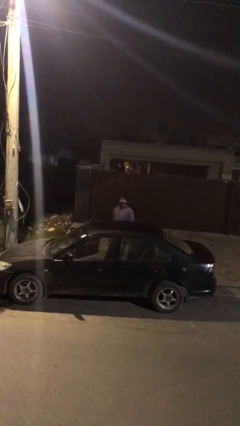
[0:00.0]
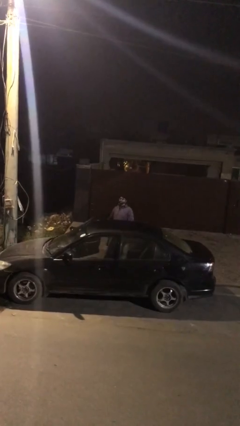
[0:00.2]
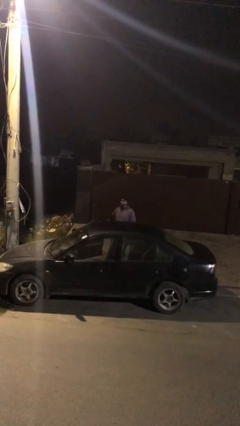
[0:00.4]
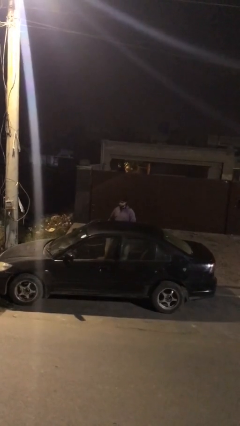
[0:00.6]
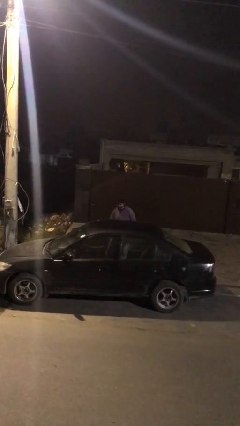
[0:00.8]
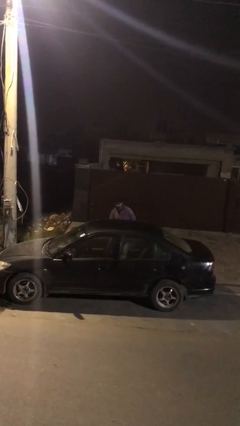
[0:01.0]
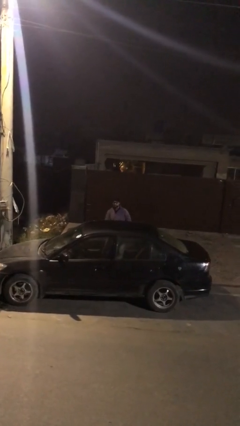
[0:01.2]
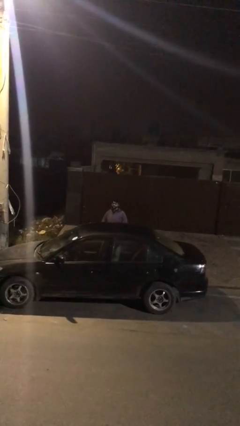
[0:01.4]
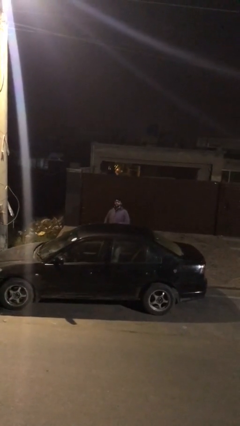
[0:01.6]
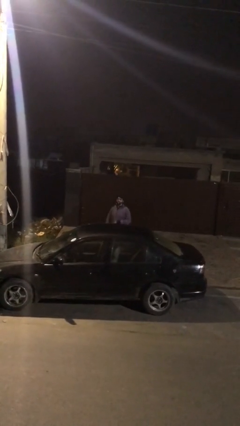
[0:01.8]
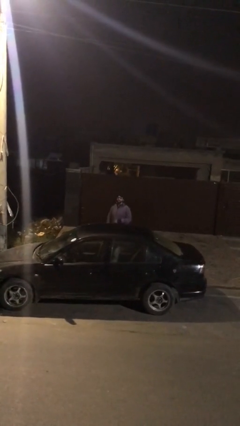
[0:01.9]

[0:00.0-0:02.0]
person closes car door

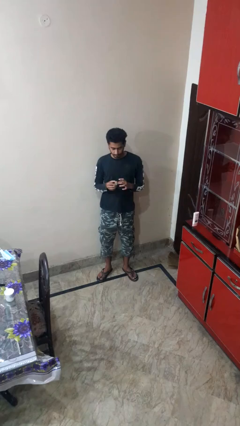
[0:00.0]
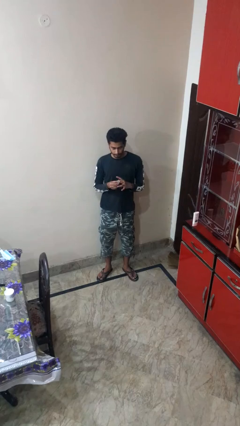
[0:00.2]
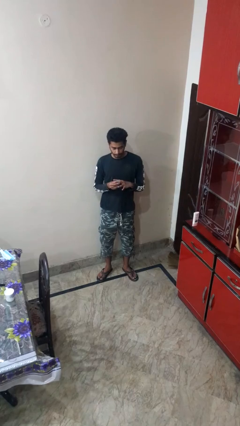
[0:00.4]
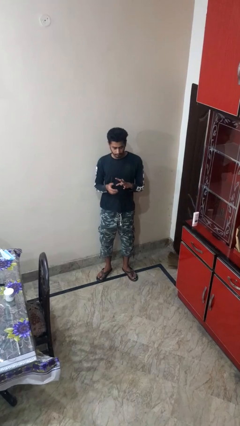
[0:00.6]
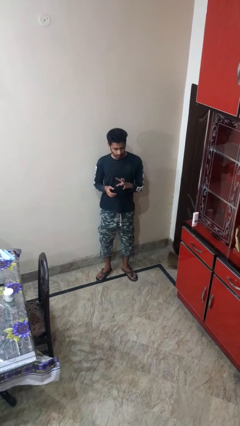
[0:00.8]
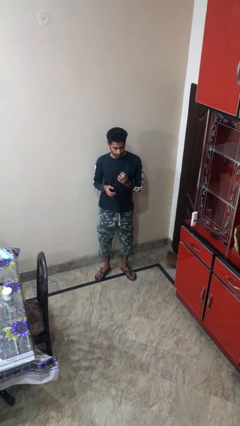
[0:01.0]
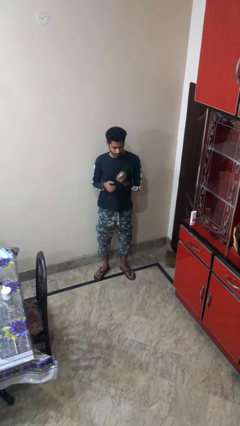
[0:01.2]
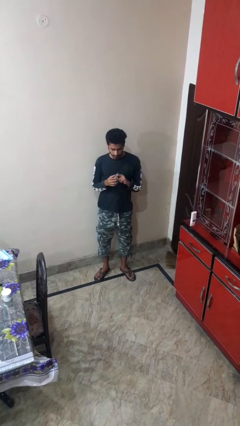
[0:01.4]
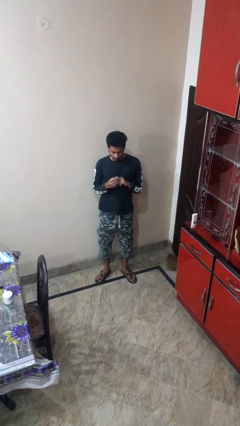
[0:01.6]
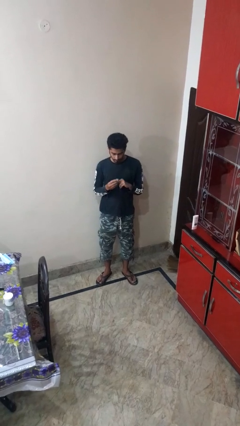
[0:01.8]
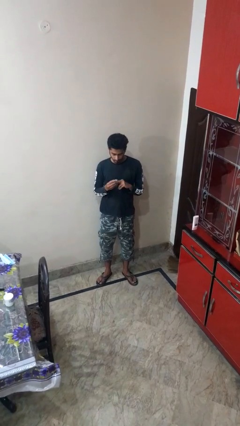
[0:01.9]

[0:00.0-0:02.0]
person puts on ring

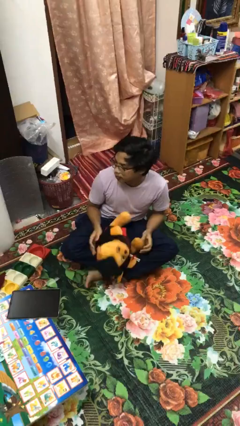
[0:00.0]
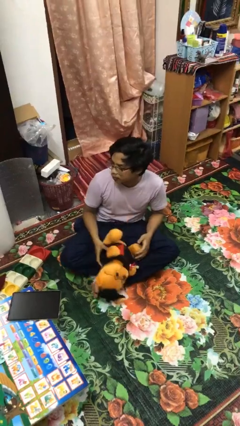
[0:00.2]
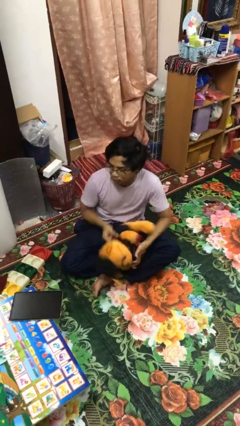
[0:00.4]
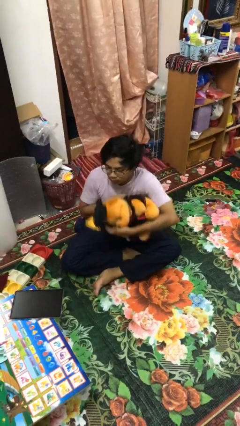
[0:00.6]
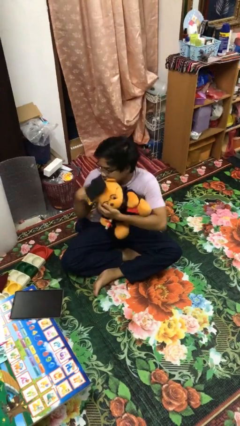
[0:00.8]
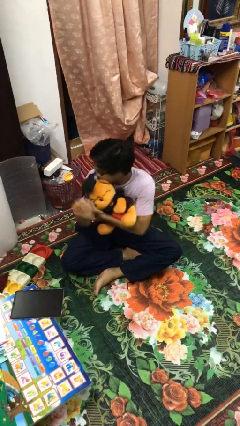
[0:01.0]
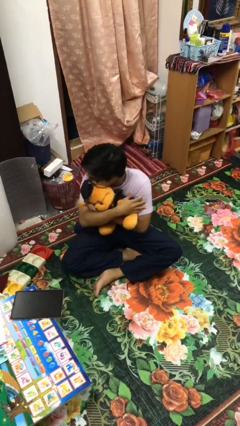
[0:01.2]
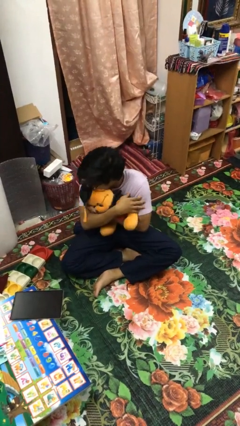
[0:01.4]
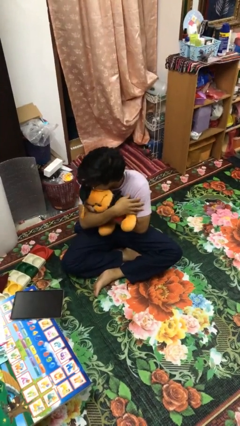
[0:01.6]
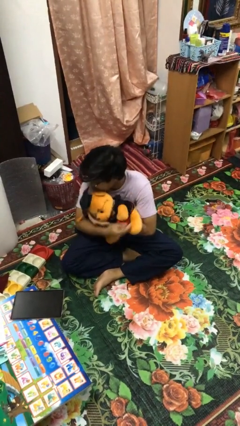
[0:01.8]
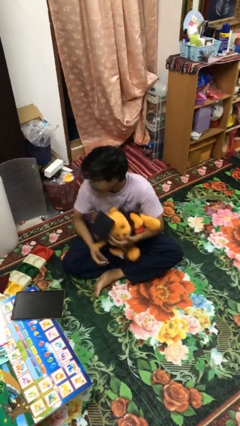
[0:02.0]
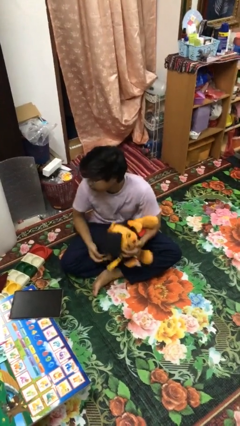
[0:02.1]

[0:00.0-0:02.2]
person hugs stuffed animal

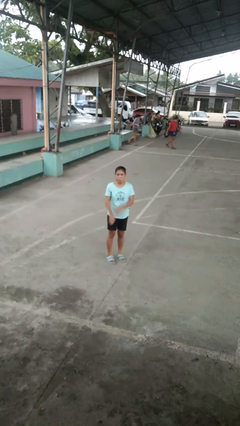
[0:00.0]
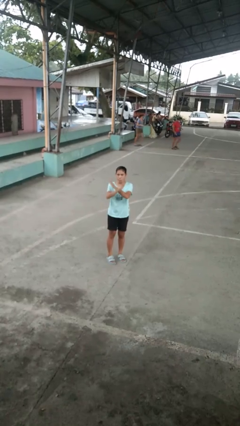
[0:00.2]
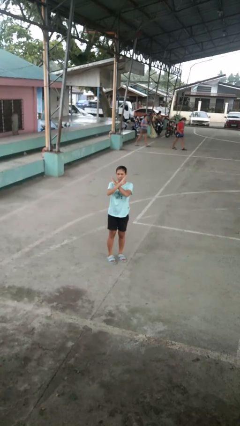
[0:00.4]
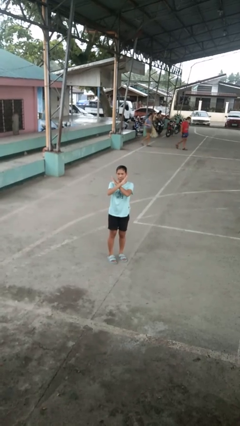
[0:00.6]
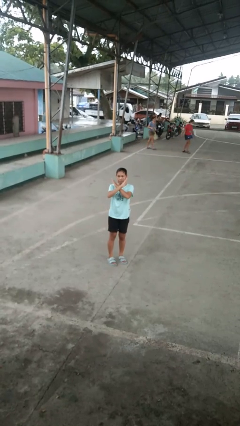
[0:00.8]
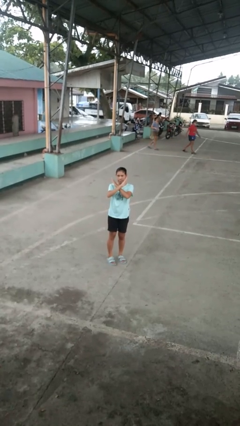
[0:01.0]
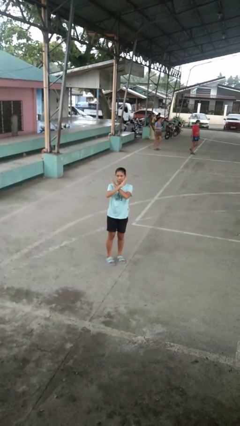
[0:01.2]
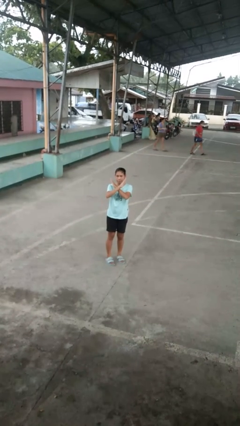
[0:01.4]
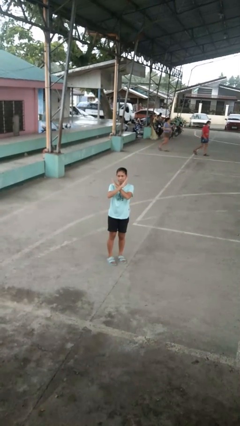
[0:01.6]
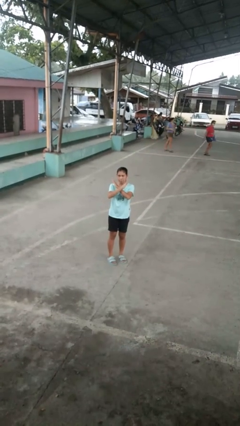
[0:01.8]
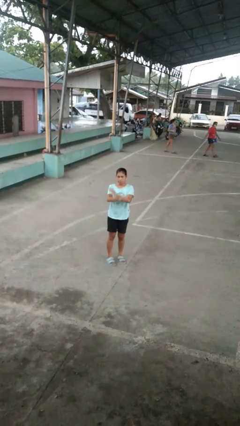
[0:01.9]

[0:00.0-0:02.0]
person gestures arms x

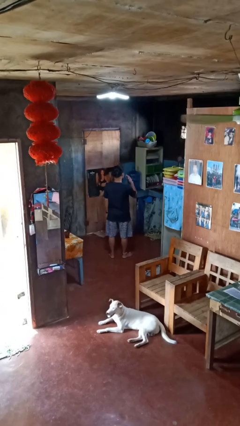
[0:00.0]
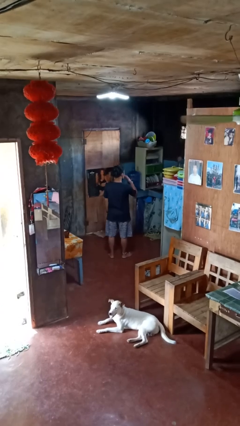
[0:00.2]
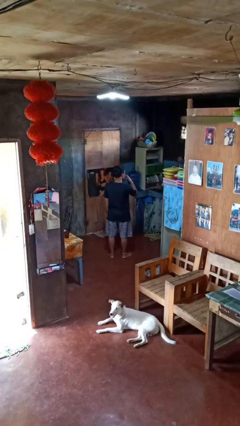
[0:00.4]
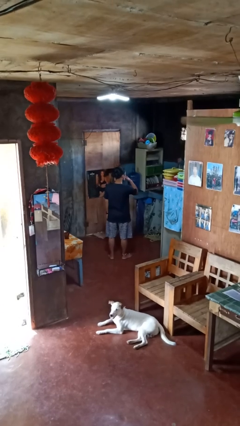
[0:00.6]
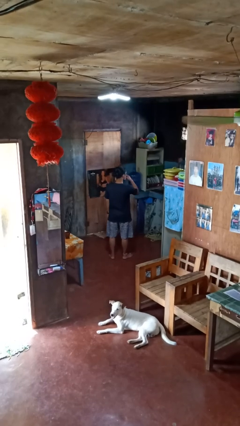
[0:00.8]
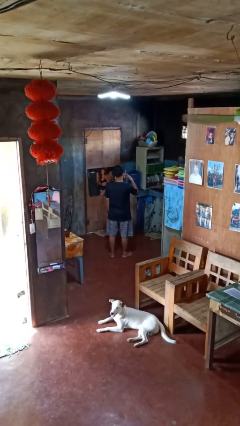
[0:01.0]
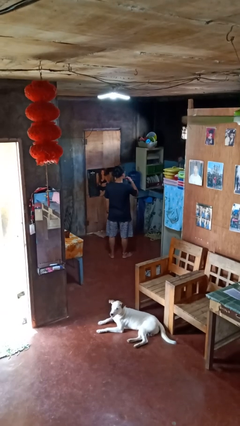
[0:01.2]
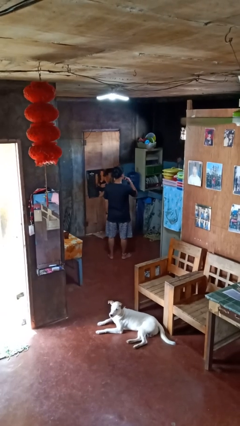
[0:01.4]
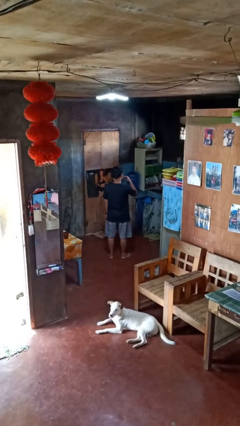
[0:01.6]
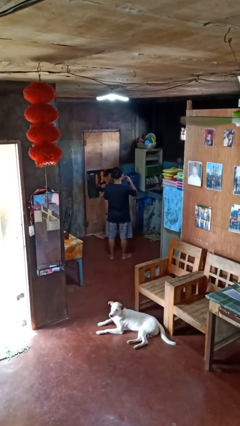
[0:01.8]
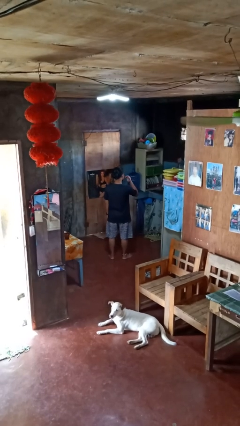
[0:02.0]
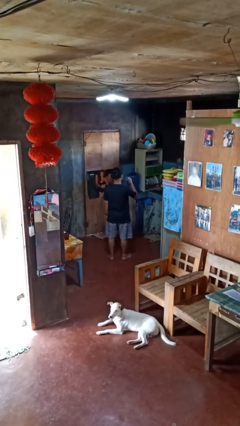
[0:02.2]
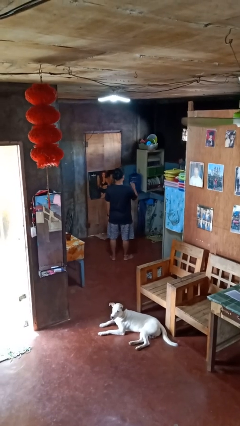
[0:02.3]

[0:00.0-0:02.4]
person licks fingers

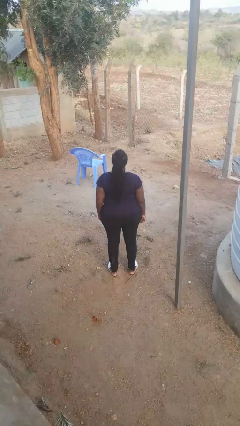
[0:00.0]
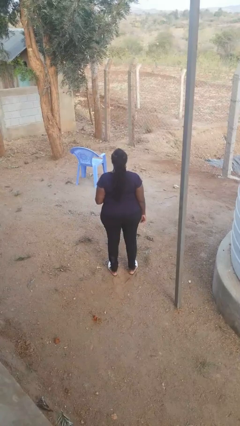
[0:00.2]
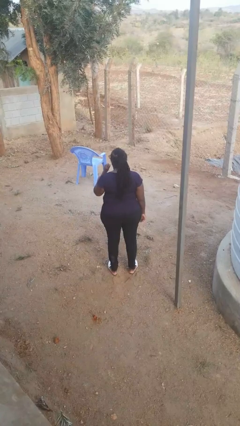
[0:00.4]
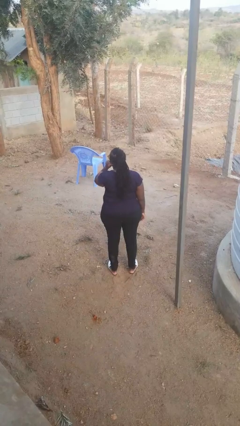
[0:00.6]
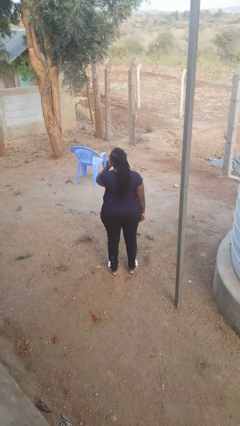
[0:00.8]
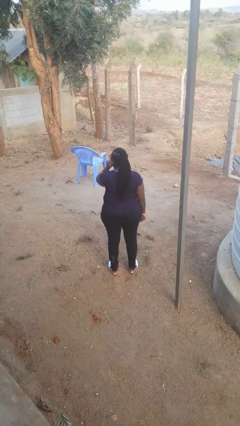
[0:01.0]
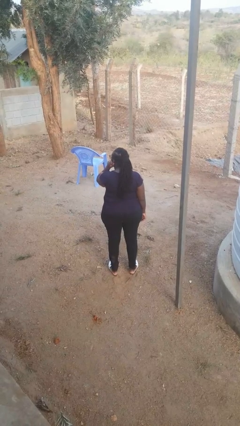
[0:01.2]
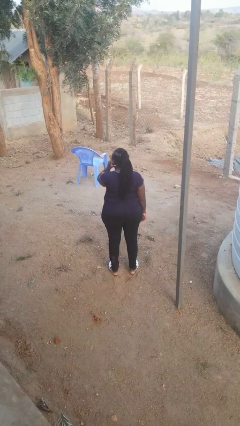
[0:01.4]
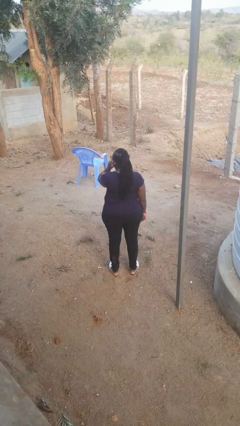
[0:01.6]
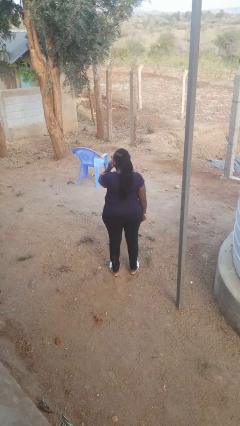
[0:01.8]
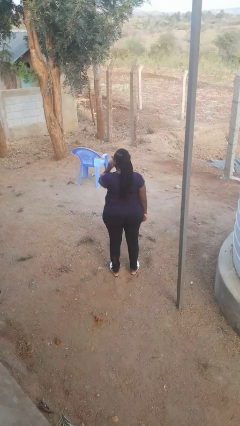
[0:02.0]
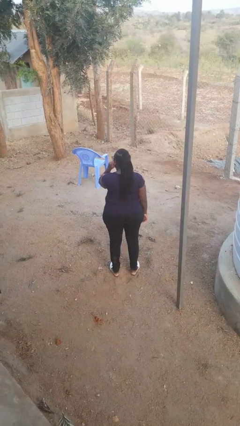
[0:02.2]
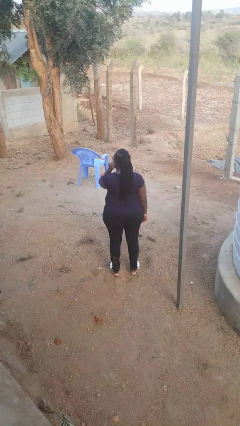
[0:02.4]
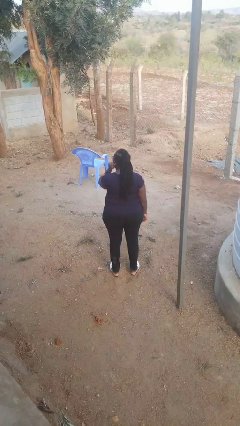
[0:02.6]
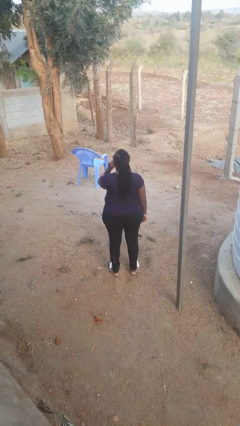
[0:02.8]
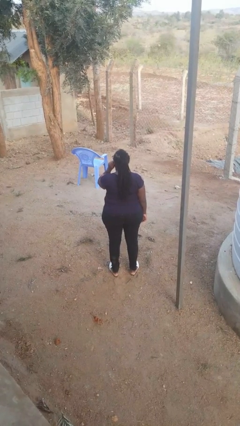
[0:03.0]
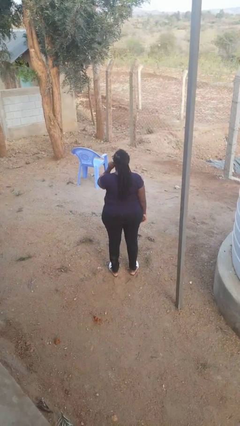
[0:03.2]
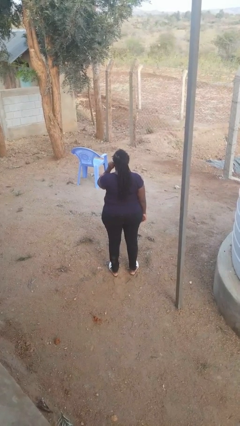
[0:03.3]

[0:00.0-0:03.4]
person touches earlobe

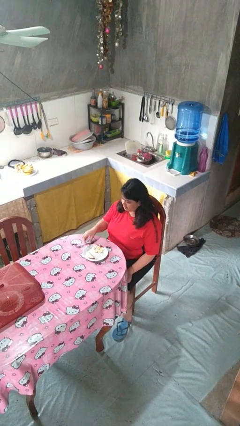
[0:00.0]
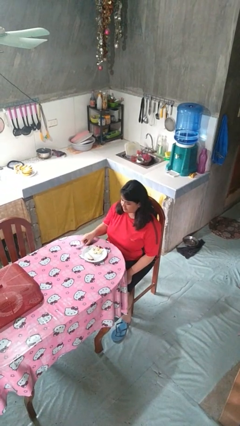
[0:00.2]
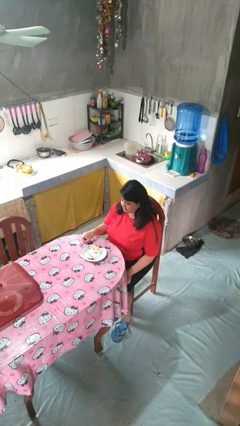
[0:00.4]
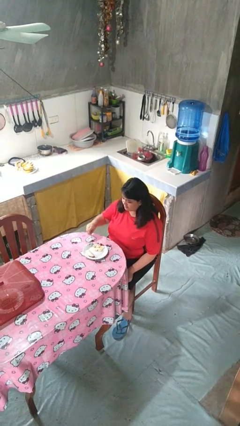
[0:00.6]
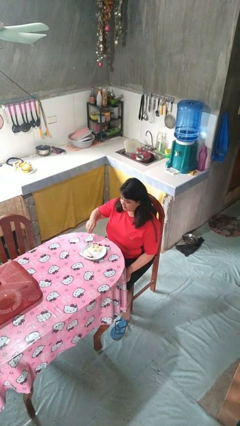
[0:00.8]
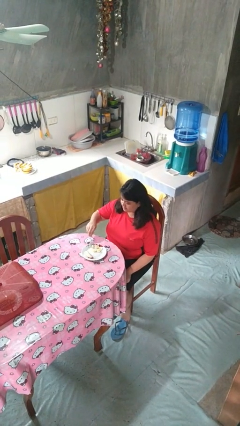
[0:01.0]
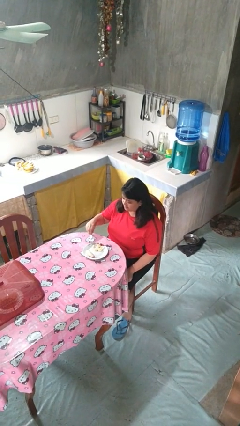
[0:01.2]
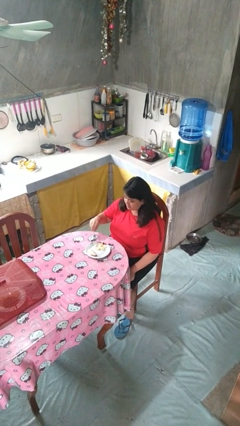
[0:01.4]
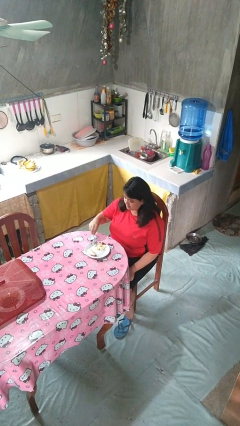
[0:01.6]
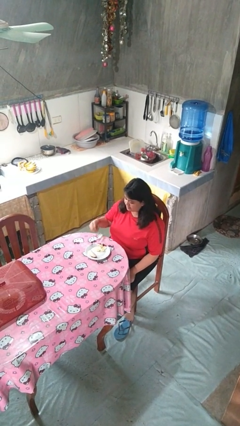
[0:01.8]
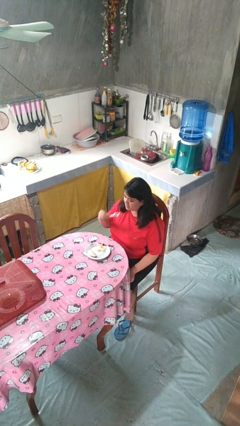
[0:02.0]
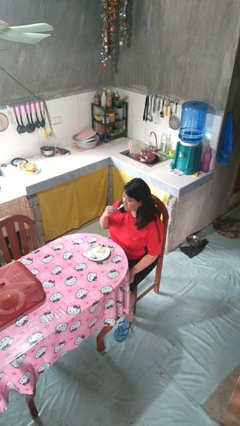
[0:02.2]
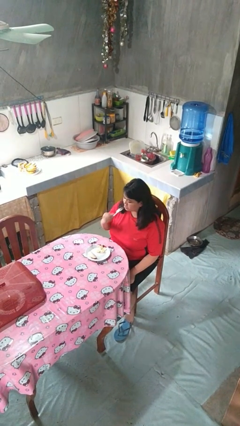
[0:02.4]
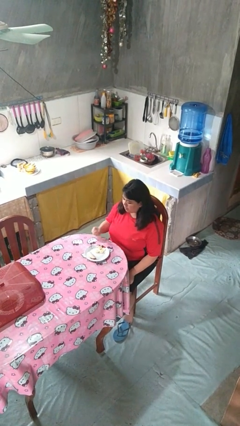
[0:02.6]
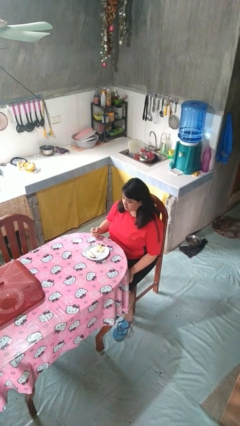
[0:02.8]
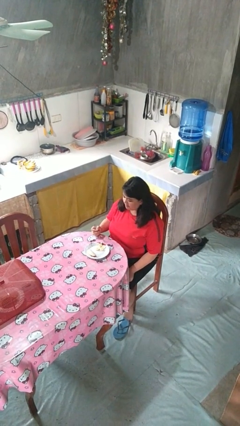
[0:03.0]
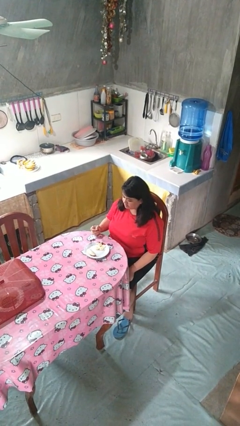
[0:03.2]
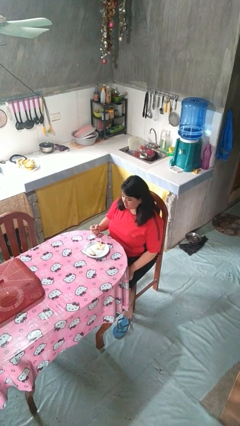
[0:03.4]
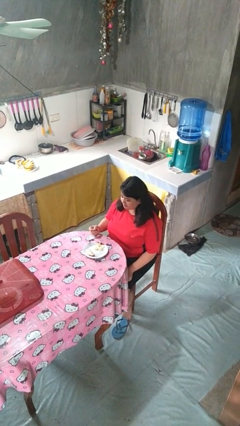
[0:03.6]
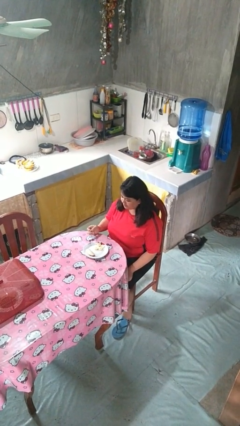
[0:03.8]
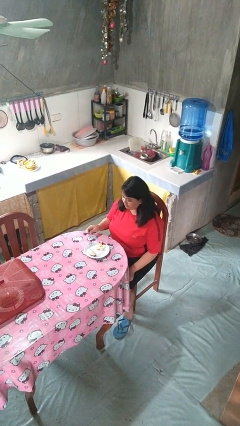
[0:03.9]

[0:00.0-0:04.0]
person eats with utensil
